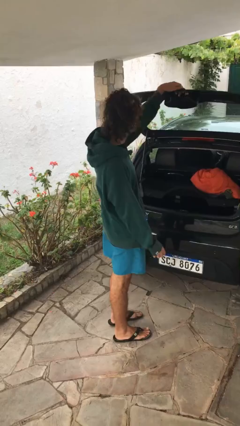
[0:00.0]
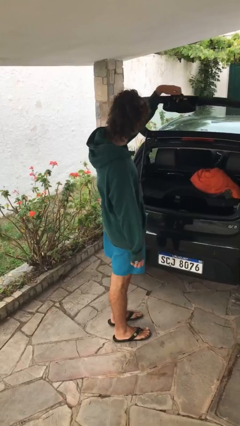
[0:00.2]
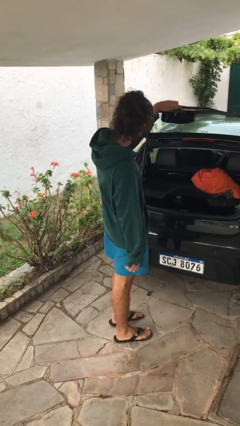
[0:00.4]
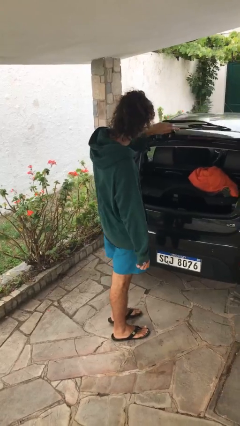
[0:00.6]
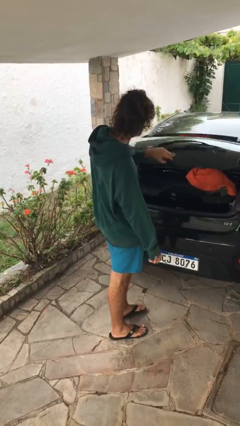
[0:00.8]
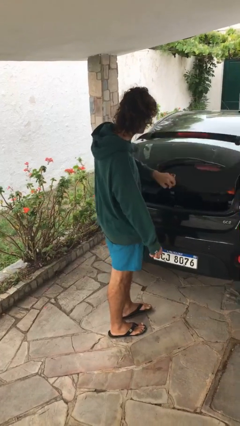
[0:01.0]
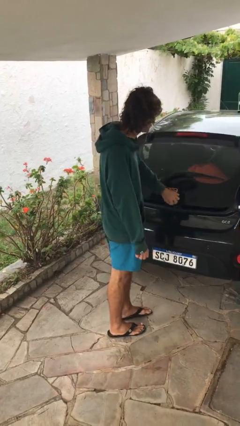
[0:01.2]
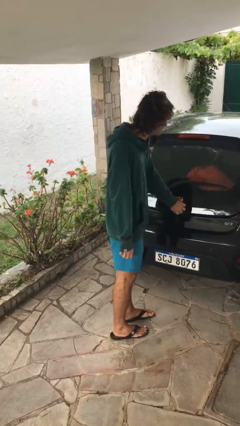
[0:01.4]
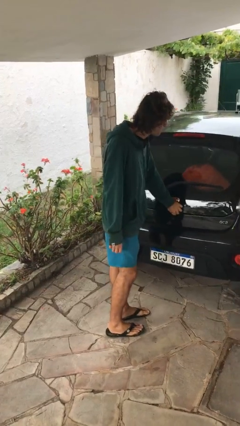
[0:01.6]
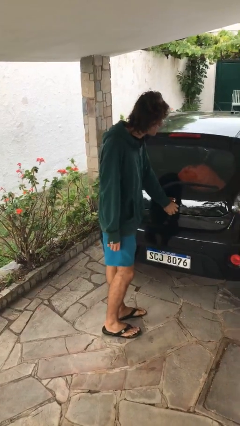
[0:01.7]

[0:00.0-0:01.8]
person closes car trunk

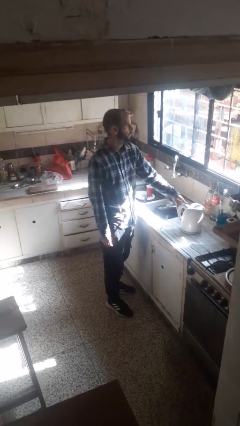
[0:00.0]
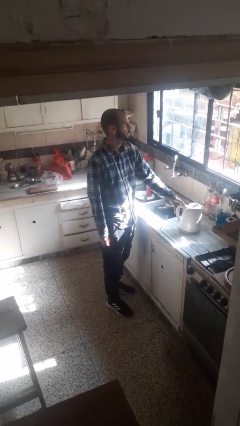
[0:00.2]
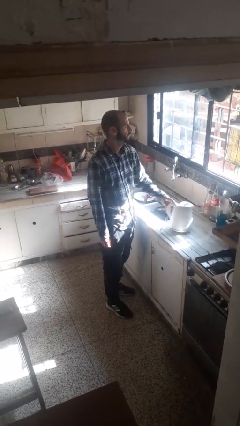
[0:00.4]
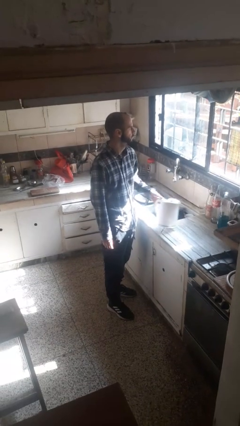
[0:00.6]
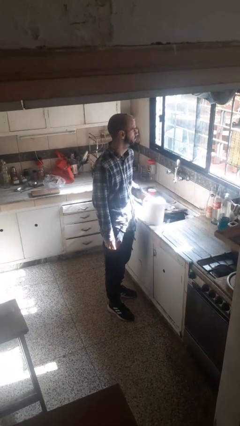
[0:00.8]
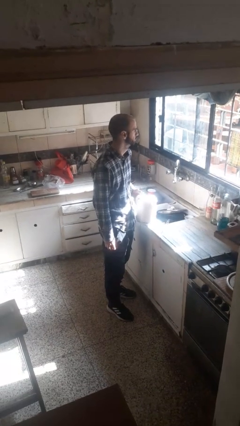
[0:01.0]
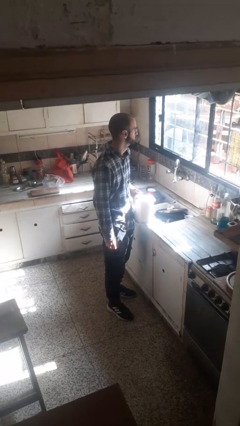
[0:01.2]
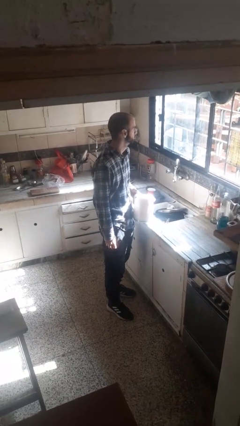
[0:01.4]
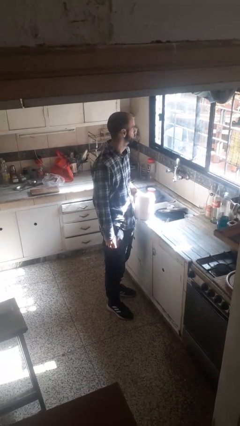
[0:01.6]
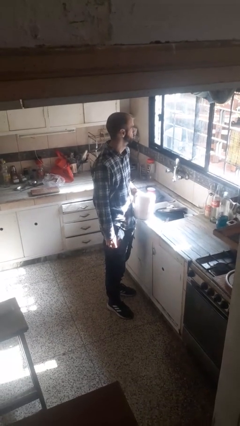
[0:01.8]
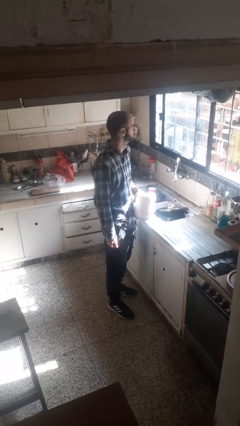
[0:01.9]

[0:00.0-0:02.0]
person picks up object from countertop

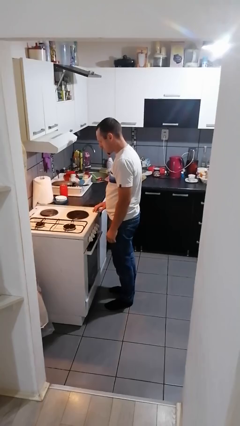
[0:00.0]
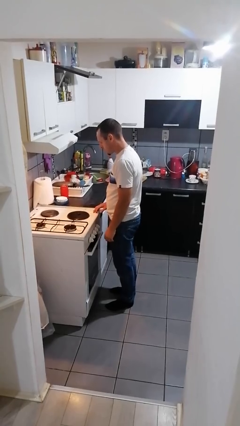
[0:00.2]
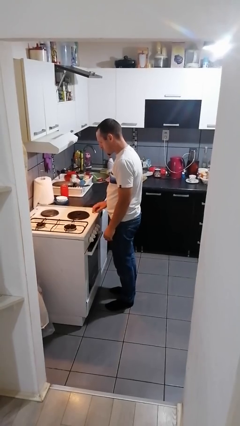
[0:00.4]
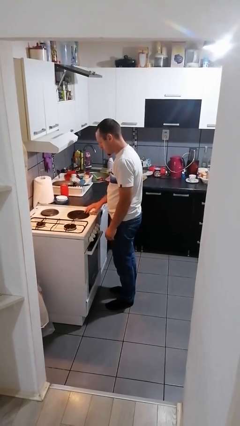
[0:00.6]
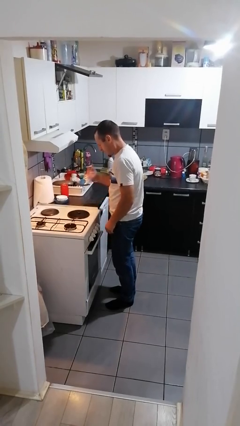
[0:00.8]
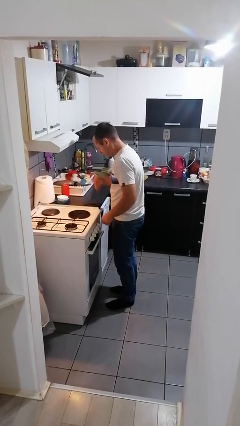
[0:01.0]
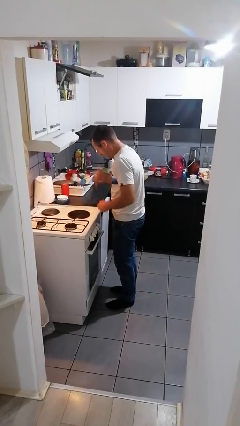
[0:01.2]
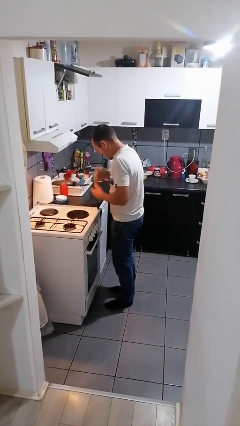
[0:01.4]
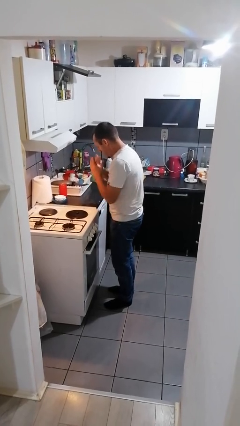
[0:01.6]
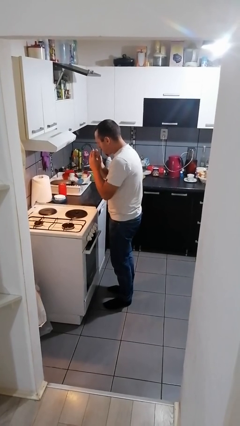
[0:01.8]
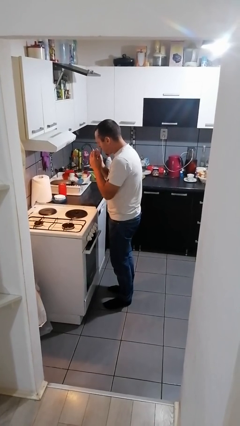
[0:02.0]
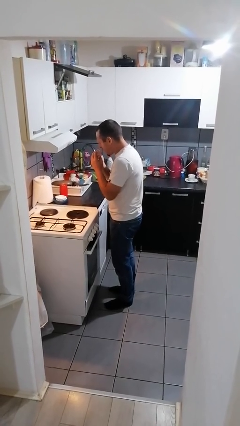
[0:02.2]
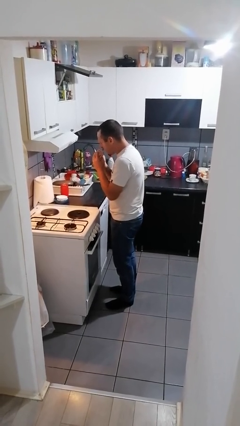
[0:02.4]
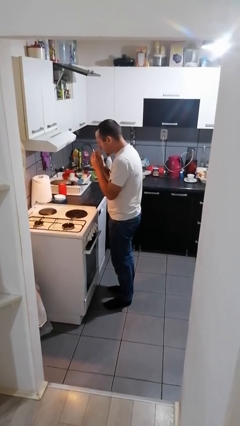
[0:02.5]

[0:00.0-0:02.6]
person burns hand

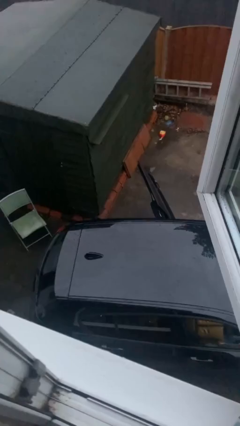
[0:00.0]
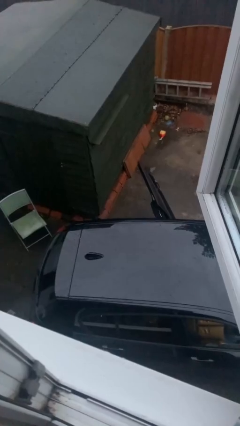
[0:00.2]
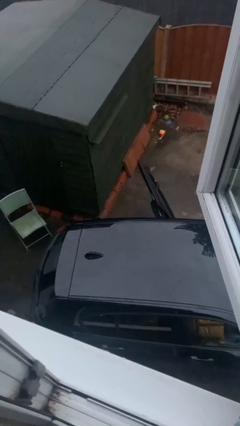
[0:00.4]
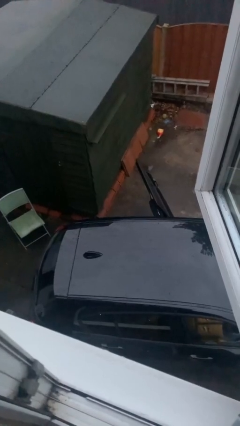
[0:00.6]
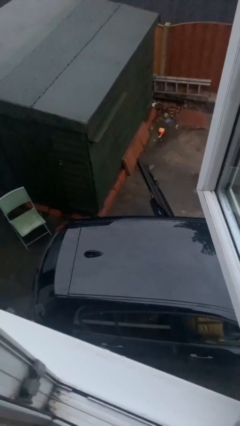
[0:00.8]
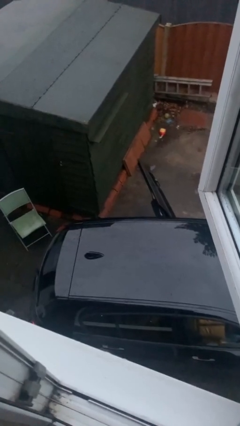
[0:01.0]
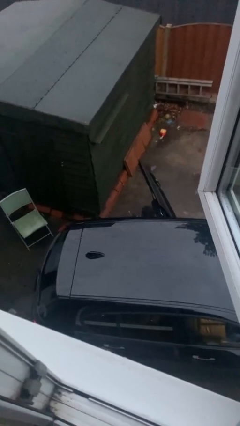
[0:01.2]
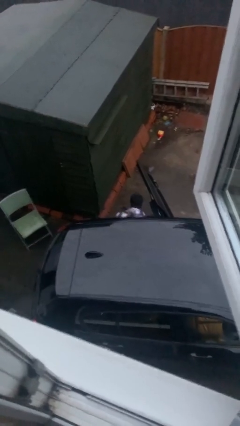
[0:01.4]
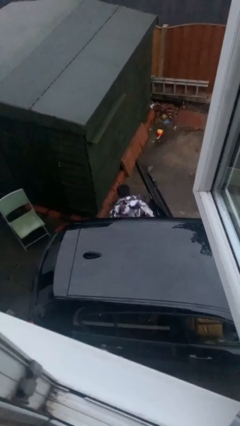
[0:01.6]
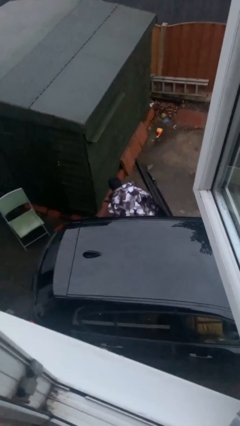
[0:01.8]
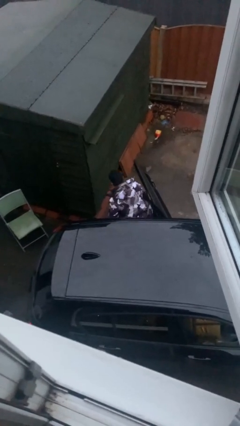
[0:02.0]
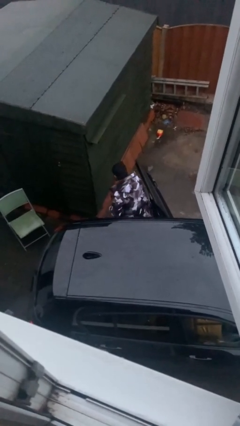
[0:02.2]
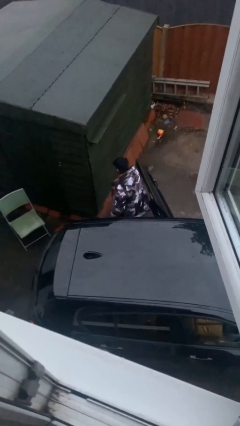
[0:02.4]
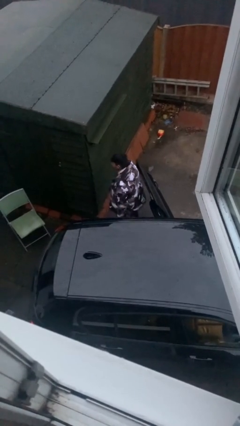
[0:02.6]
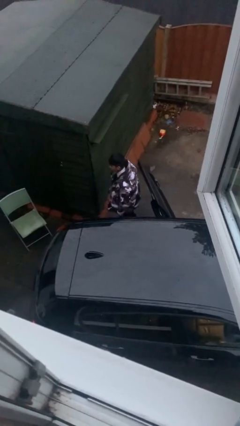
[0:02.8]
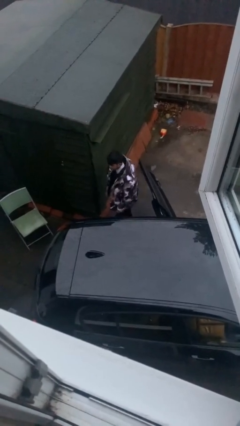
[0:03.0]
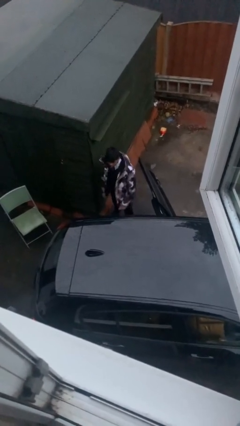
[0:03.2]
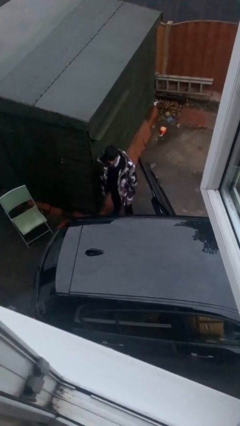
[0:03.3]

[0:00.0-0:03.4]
person exits car

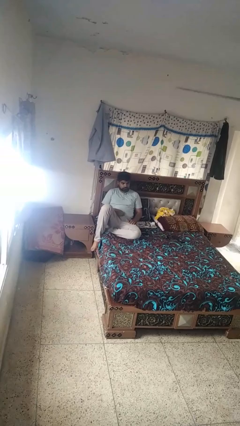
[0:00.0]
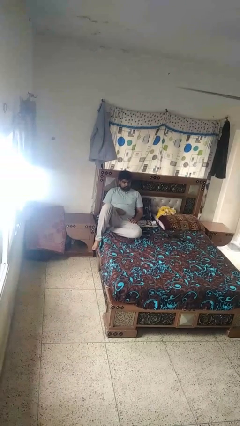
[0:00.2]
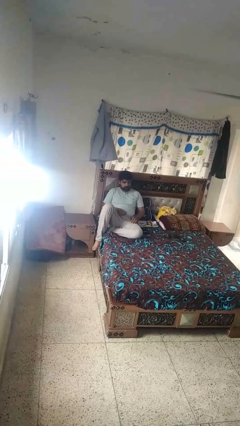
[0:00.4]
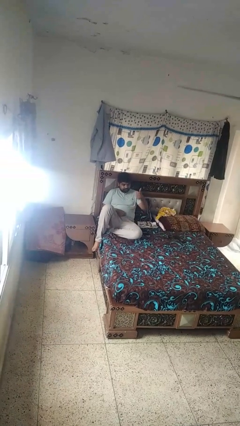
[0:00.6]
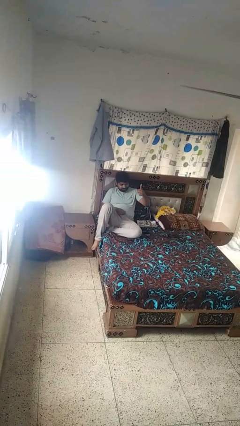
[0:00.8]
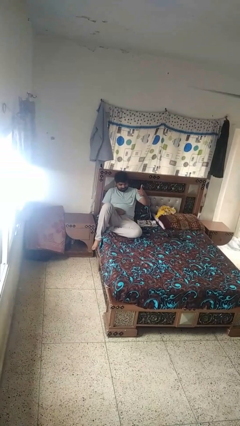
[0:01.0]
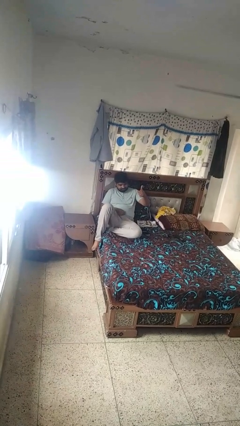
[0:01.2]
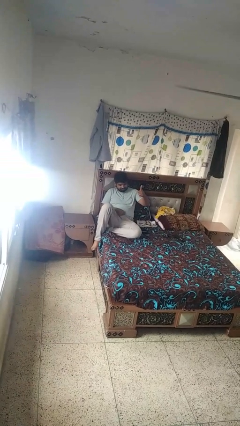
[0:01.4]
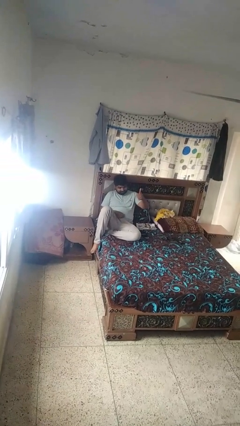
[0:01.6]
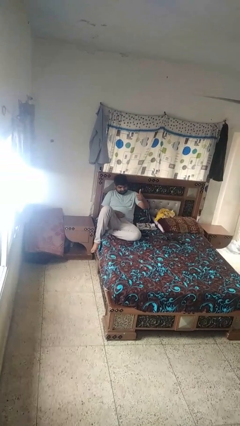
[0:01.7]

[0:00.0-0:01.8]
person gestures thumbs up

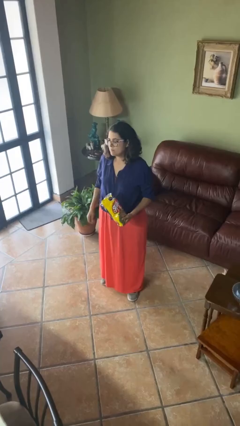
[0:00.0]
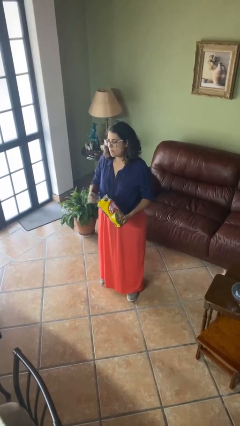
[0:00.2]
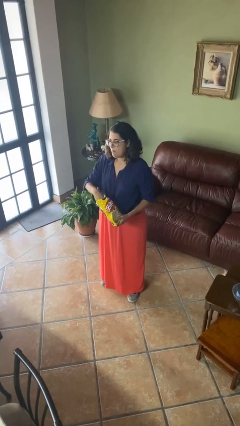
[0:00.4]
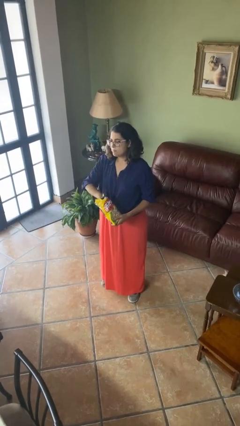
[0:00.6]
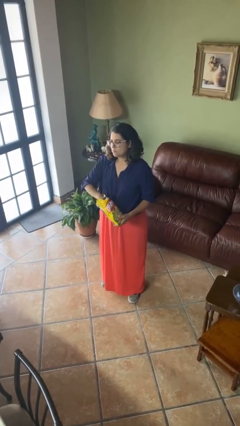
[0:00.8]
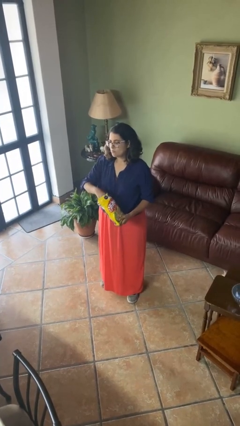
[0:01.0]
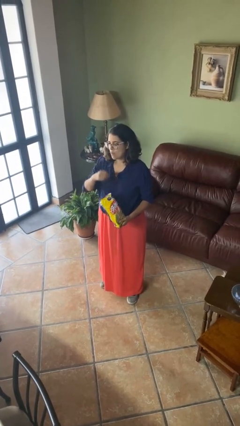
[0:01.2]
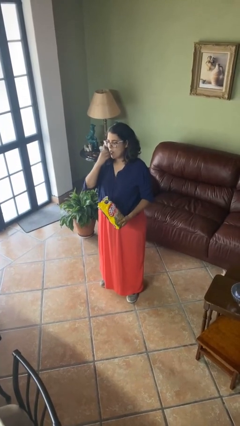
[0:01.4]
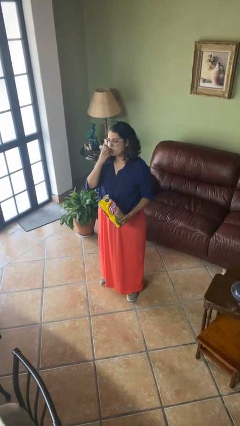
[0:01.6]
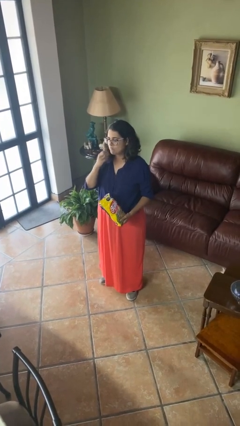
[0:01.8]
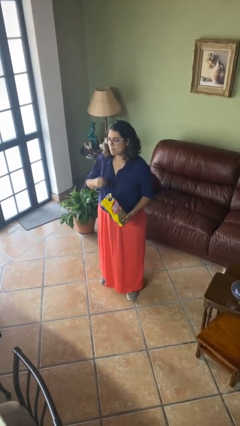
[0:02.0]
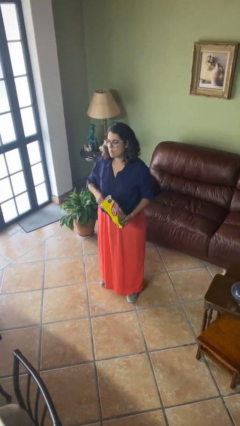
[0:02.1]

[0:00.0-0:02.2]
person eats snack from bag

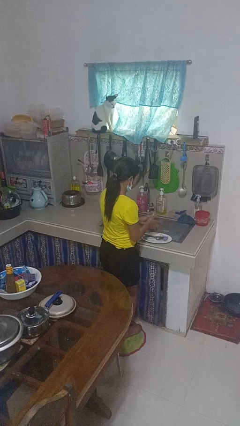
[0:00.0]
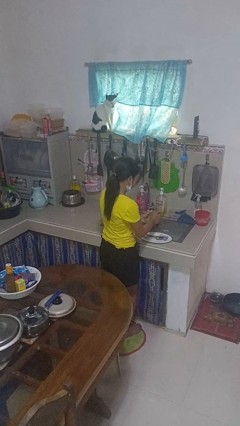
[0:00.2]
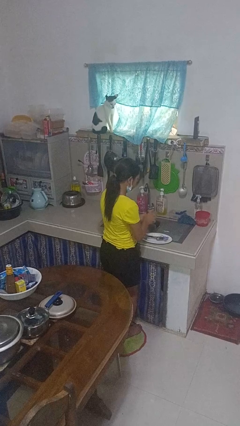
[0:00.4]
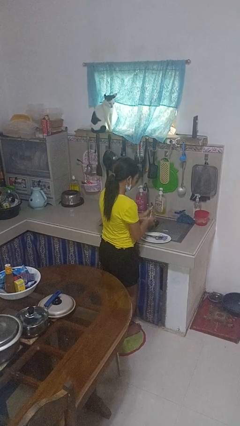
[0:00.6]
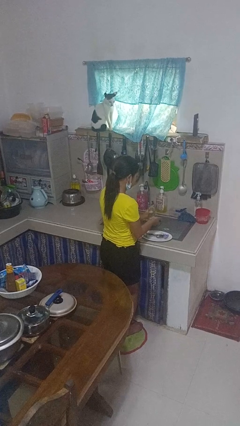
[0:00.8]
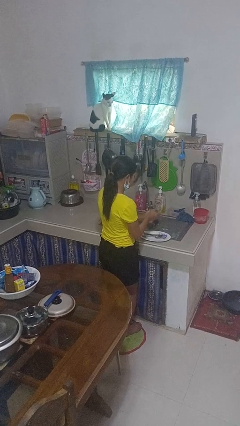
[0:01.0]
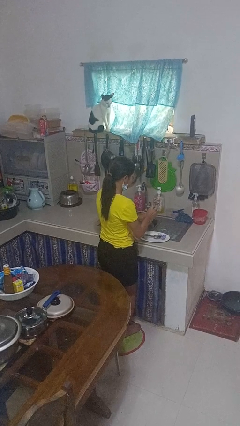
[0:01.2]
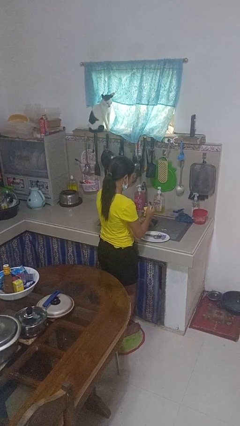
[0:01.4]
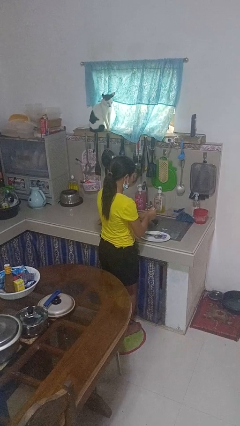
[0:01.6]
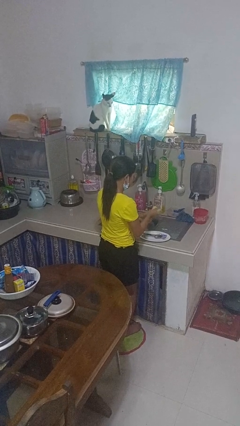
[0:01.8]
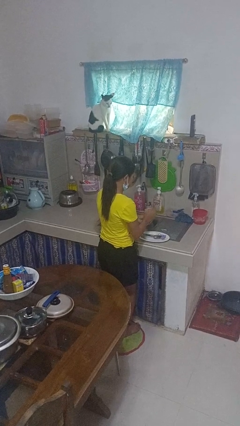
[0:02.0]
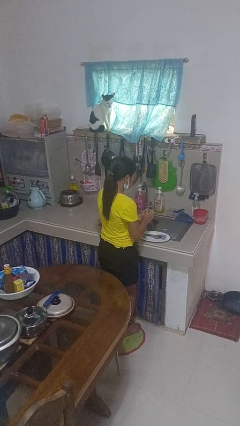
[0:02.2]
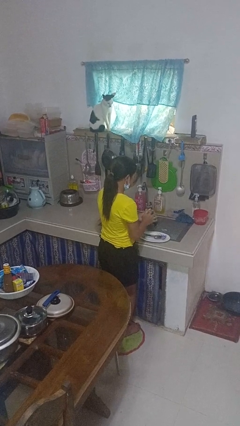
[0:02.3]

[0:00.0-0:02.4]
person washes dish

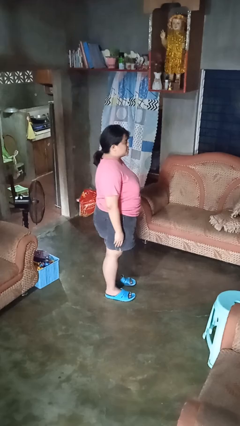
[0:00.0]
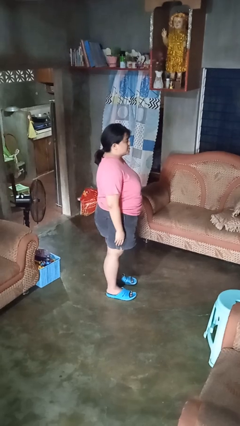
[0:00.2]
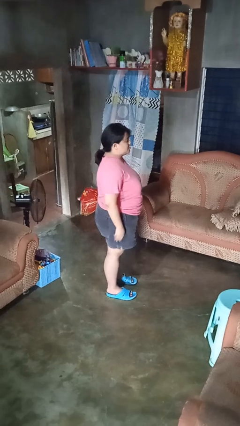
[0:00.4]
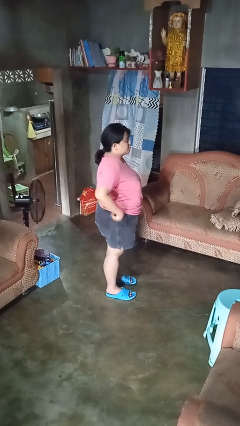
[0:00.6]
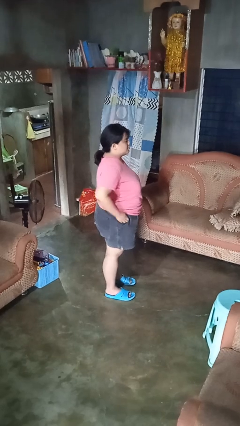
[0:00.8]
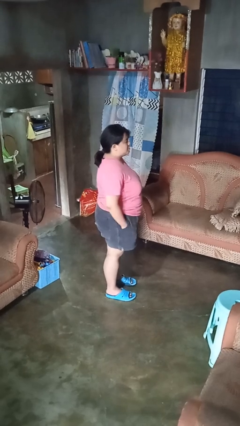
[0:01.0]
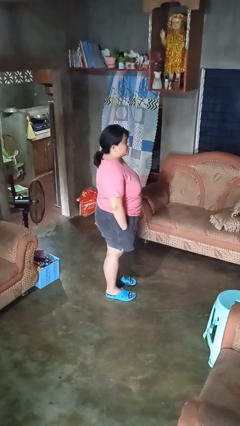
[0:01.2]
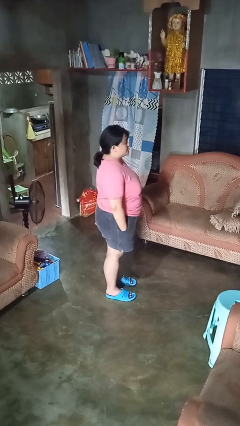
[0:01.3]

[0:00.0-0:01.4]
person puts hands in back pockets
